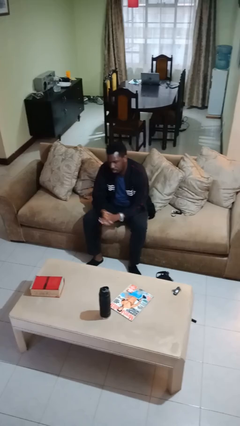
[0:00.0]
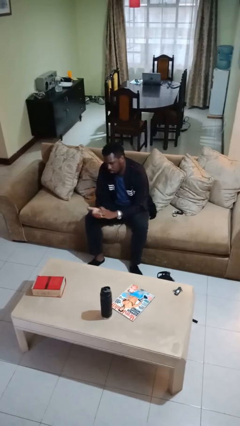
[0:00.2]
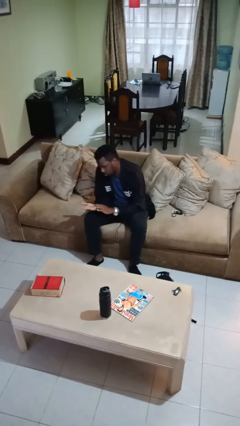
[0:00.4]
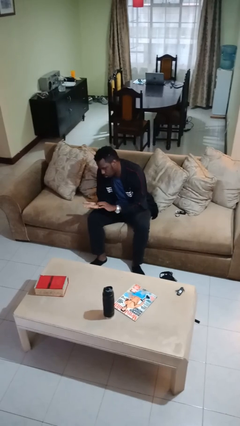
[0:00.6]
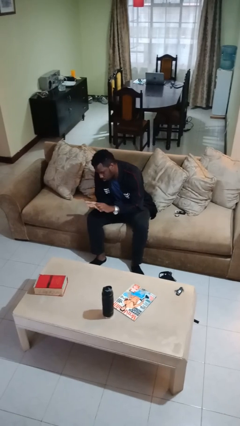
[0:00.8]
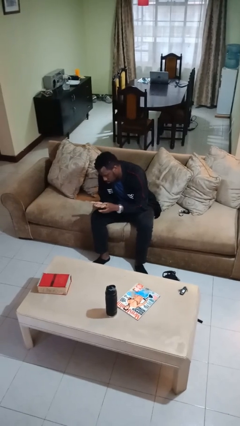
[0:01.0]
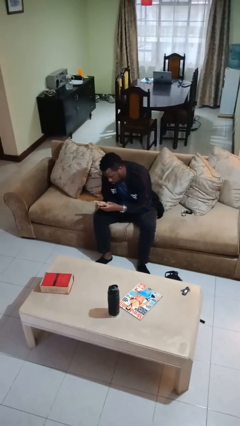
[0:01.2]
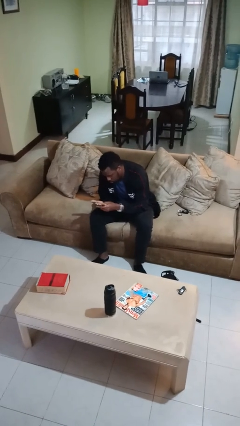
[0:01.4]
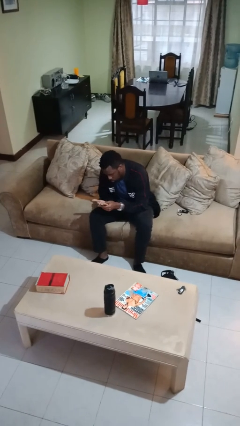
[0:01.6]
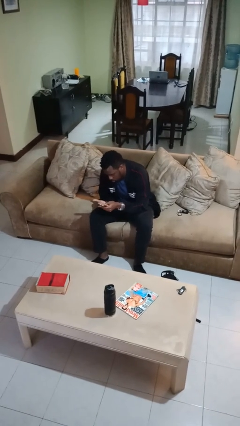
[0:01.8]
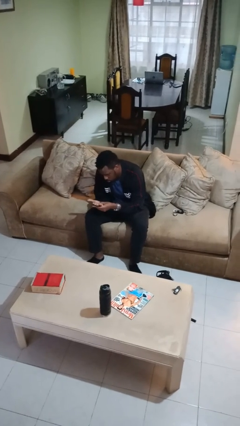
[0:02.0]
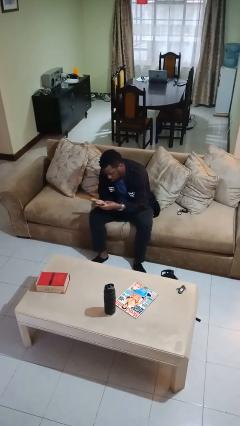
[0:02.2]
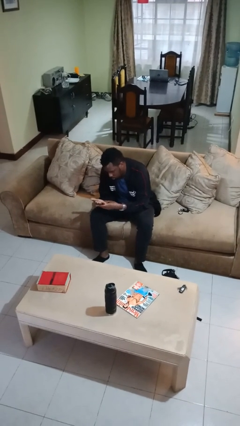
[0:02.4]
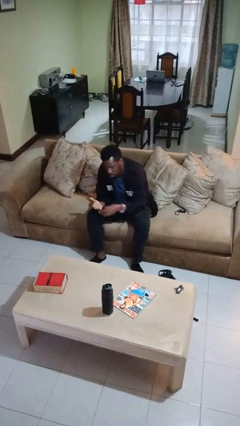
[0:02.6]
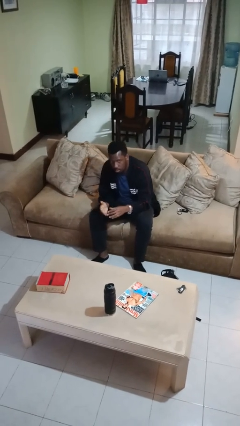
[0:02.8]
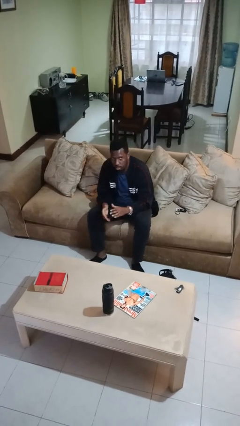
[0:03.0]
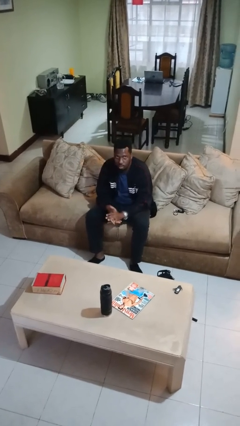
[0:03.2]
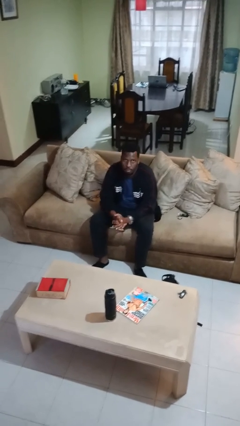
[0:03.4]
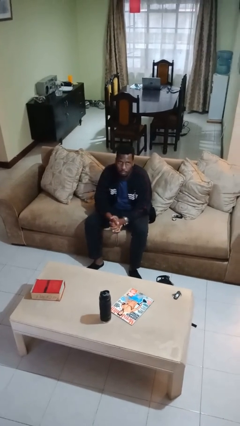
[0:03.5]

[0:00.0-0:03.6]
person looks at hands in lap

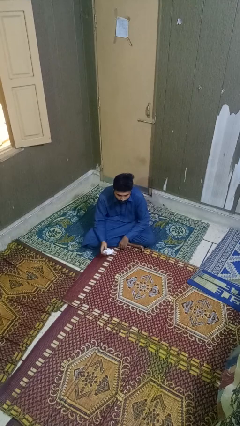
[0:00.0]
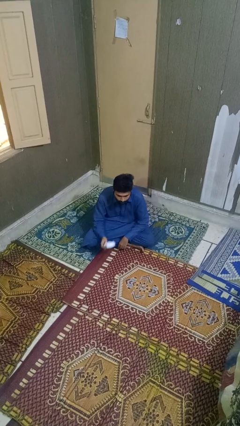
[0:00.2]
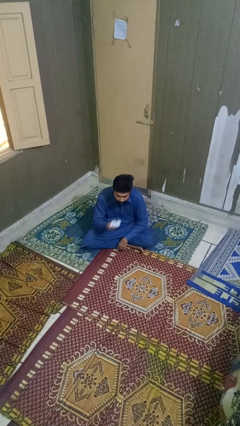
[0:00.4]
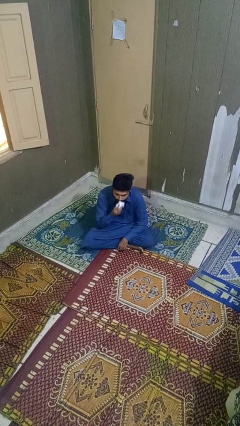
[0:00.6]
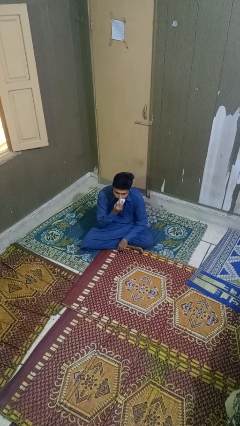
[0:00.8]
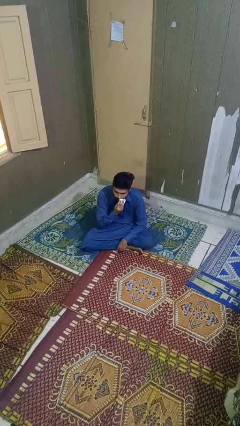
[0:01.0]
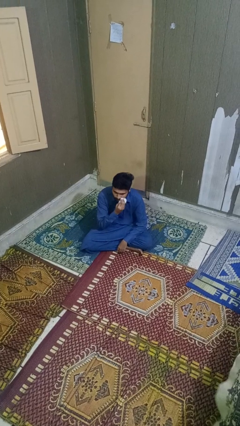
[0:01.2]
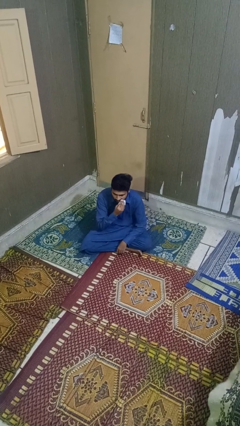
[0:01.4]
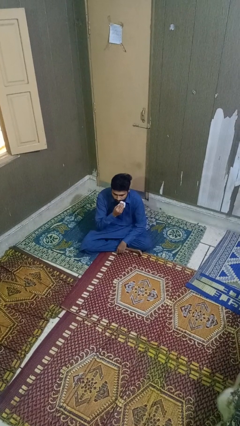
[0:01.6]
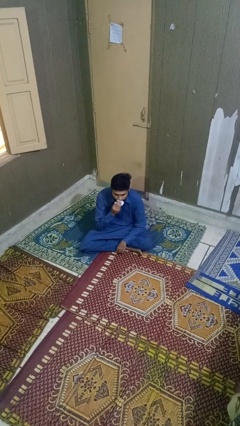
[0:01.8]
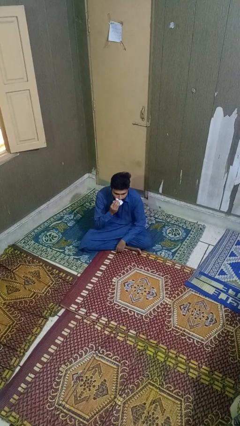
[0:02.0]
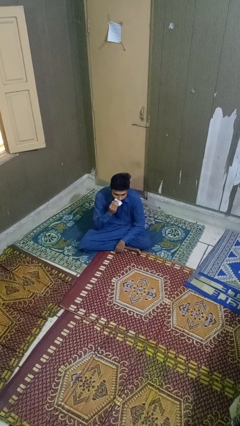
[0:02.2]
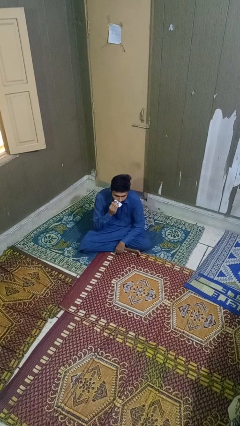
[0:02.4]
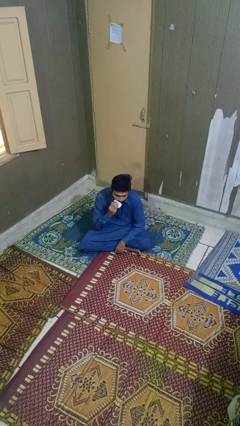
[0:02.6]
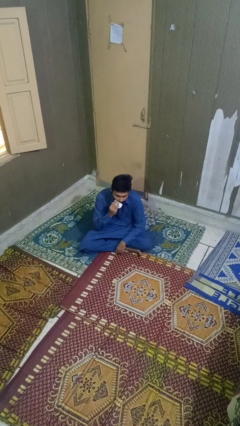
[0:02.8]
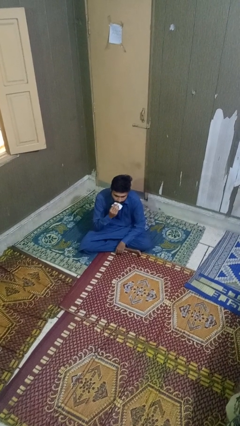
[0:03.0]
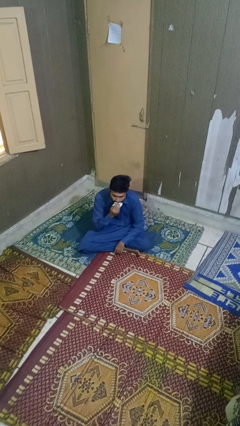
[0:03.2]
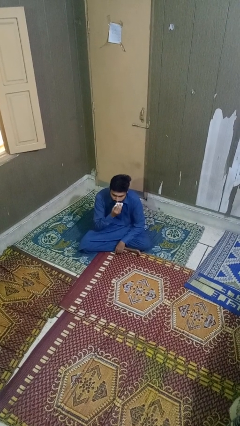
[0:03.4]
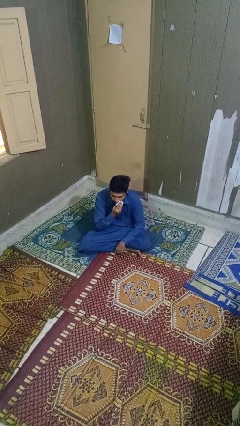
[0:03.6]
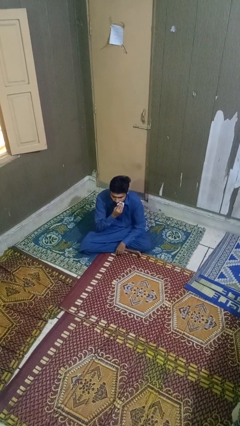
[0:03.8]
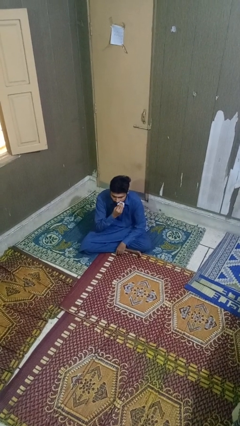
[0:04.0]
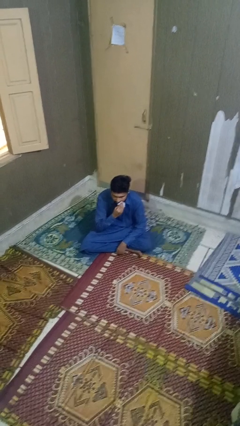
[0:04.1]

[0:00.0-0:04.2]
person wipes mouth with napkin

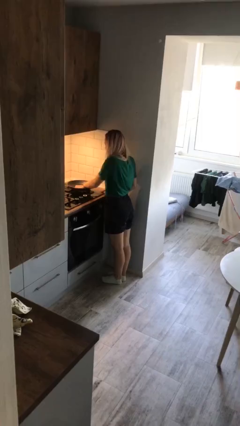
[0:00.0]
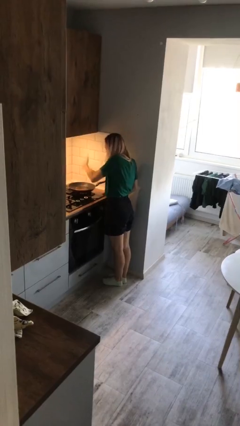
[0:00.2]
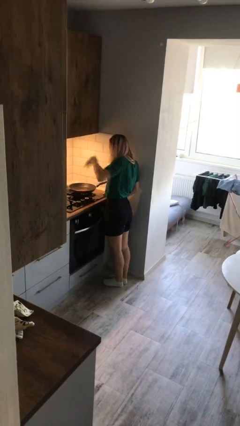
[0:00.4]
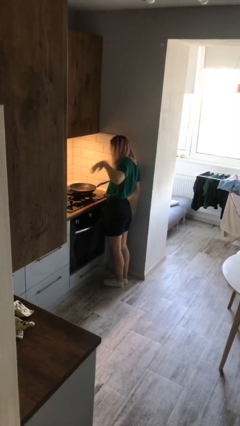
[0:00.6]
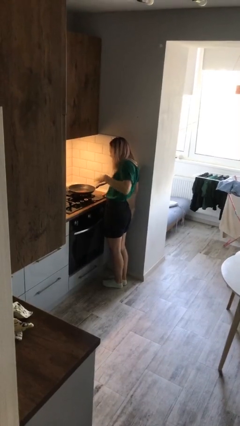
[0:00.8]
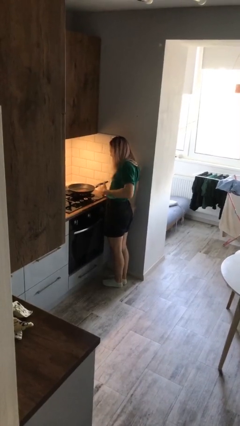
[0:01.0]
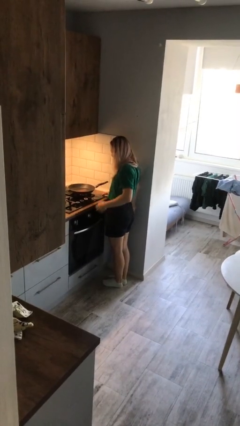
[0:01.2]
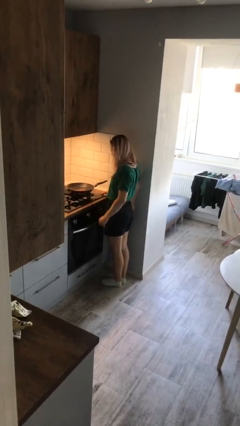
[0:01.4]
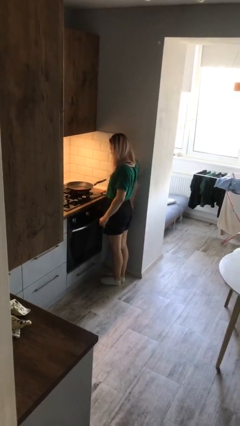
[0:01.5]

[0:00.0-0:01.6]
person burns hand

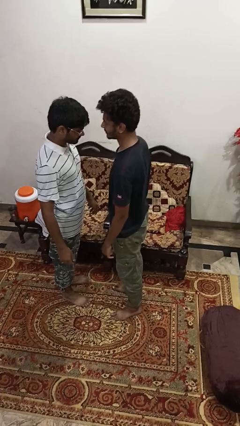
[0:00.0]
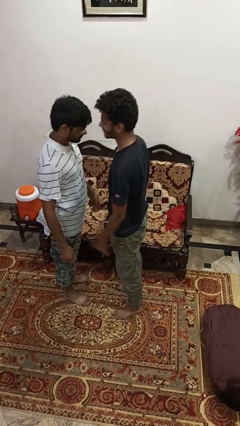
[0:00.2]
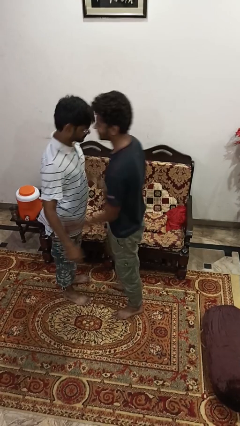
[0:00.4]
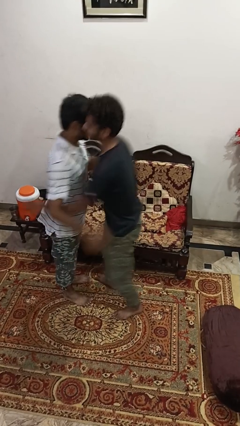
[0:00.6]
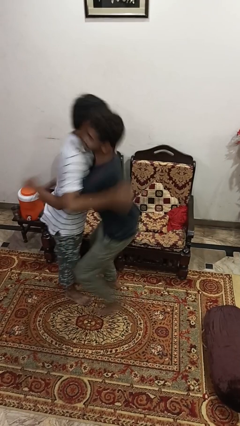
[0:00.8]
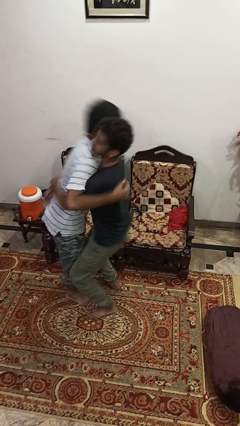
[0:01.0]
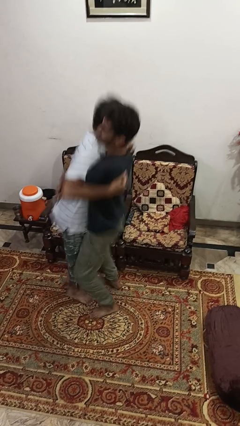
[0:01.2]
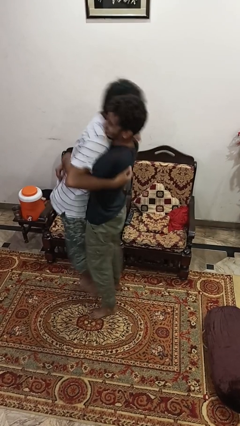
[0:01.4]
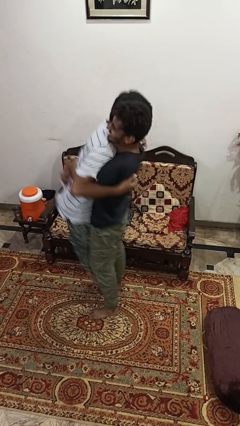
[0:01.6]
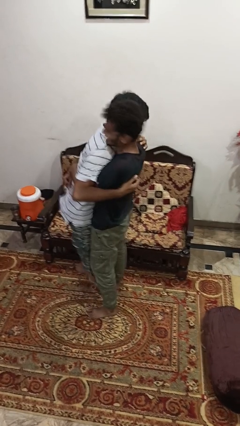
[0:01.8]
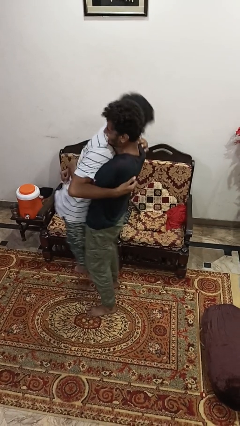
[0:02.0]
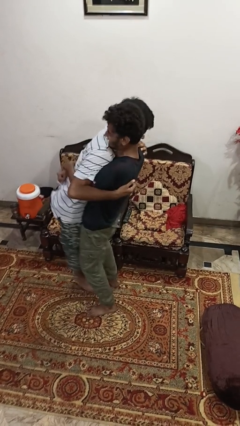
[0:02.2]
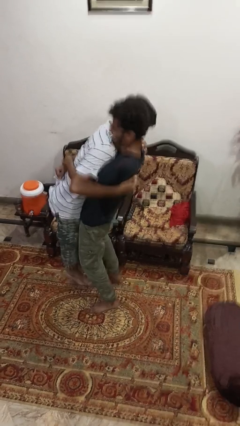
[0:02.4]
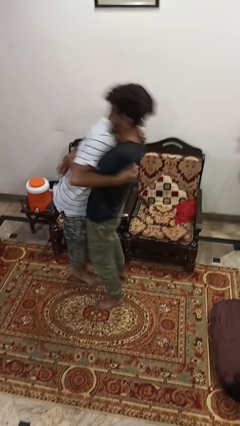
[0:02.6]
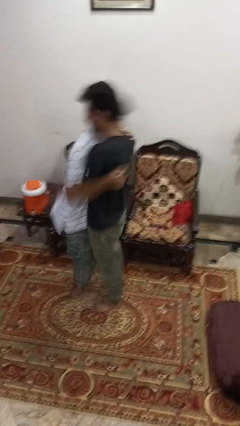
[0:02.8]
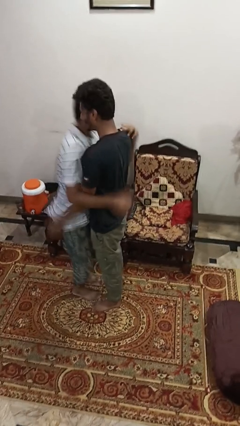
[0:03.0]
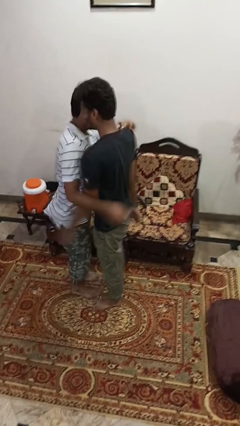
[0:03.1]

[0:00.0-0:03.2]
person picks up person

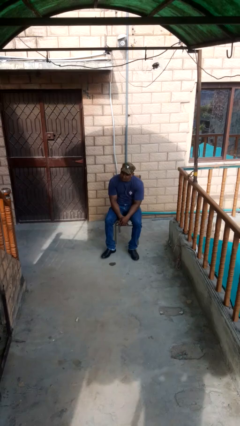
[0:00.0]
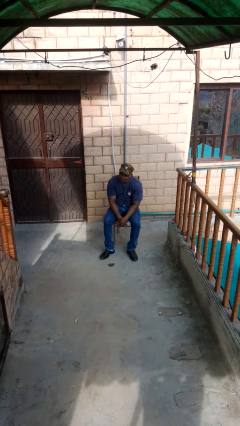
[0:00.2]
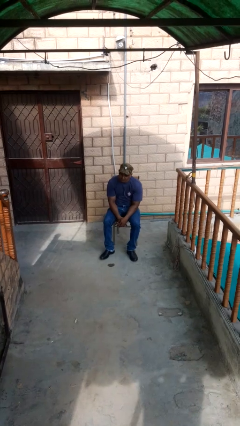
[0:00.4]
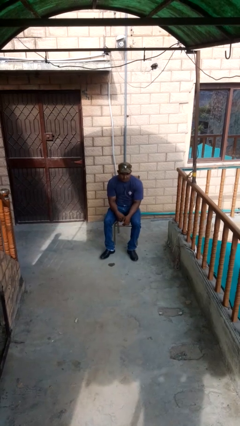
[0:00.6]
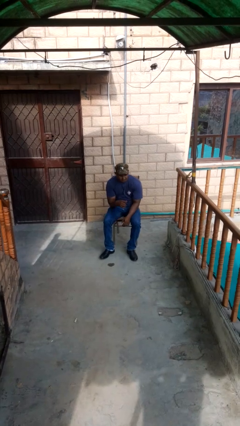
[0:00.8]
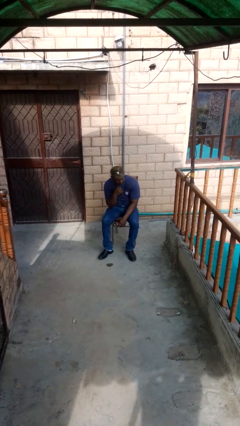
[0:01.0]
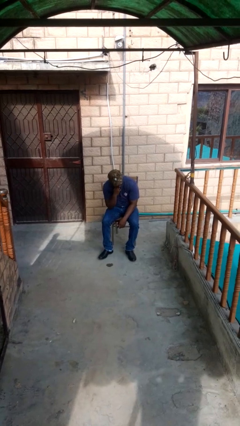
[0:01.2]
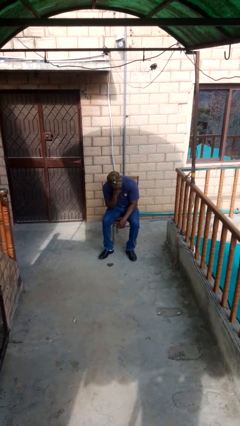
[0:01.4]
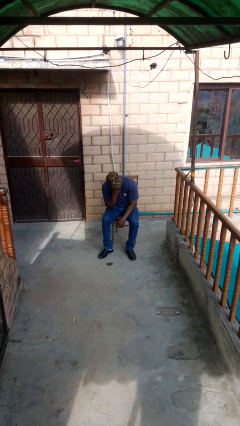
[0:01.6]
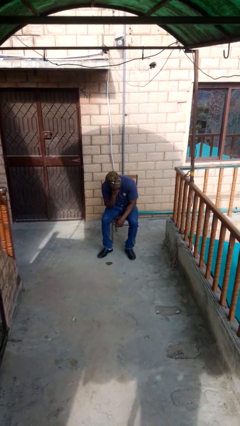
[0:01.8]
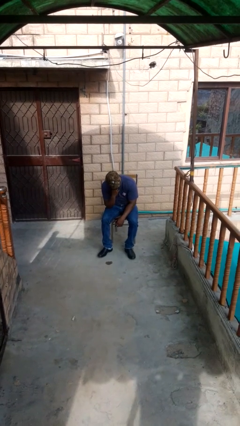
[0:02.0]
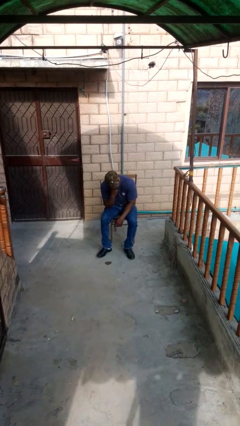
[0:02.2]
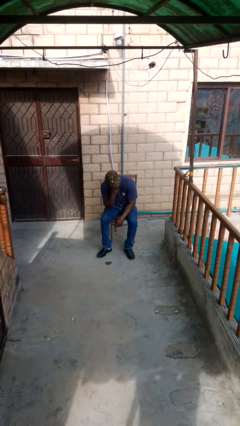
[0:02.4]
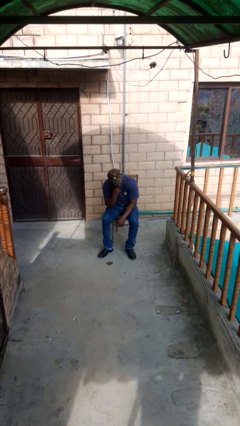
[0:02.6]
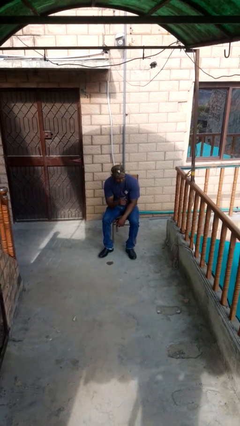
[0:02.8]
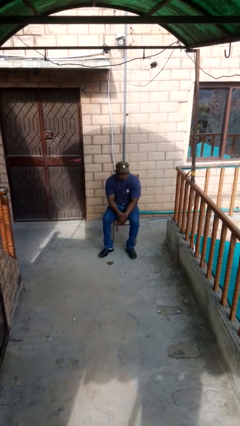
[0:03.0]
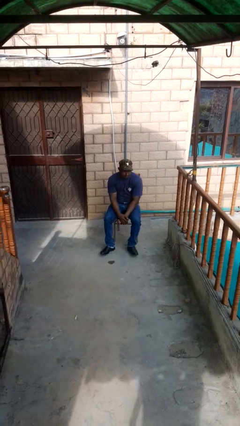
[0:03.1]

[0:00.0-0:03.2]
person strokes chin

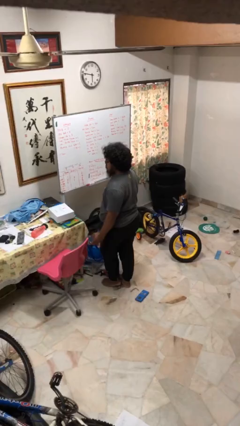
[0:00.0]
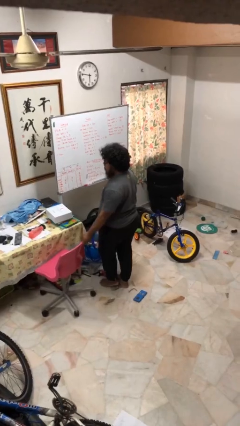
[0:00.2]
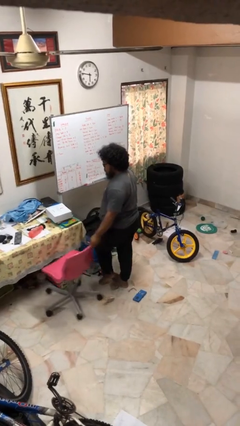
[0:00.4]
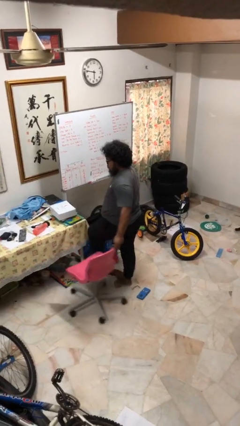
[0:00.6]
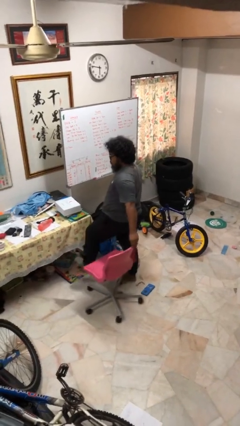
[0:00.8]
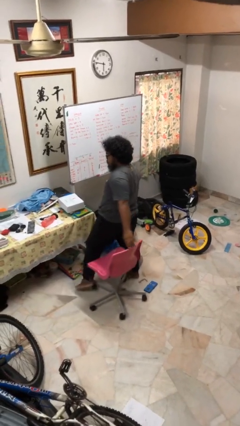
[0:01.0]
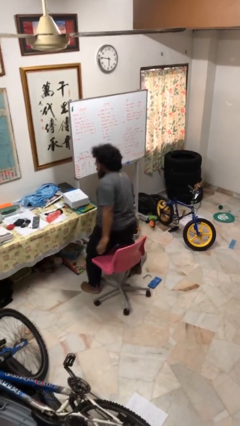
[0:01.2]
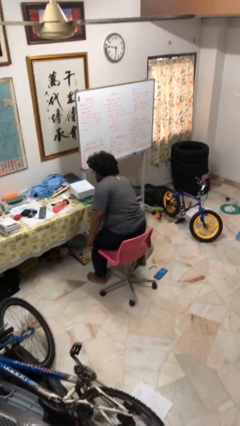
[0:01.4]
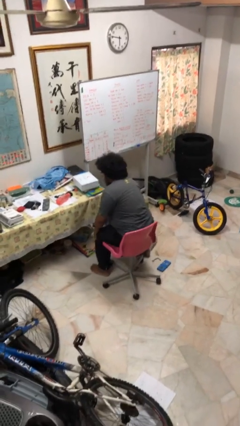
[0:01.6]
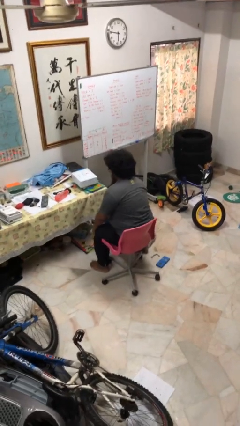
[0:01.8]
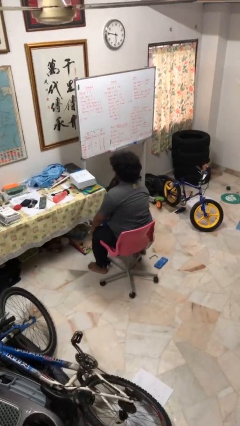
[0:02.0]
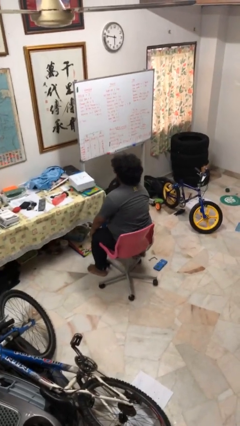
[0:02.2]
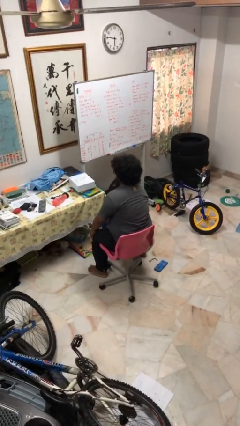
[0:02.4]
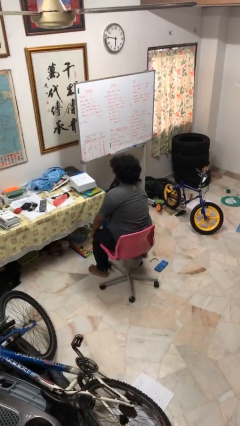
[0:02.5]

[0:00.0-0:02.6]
person sits down
